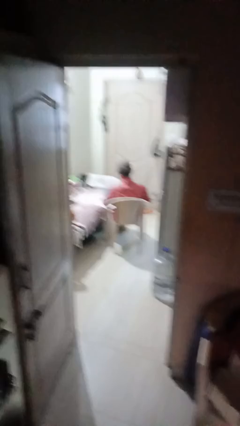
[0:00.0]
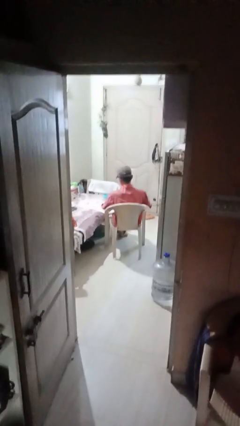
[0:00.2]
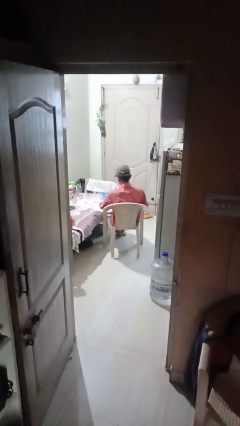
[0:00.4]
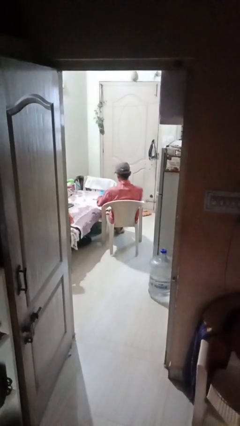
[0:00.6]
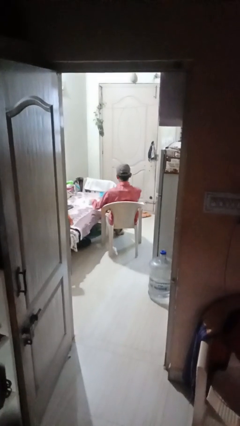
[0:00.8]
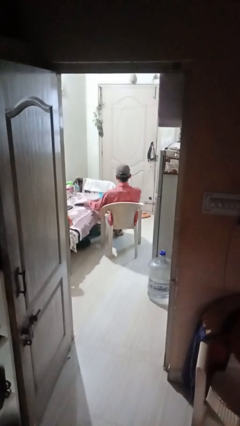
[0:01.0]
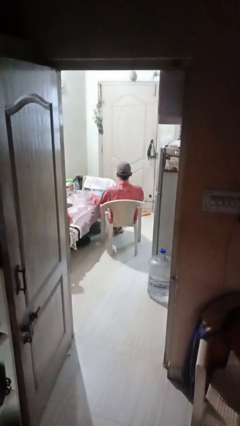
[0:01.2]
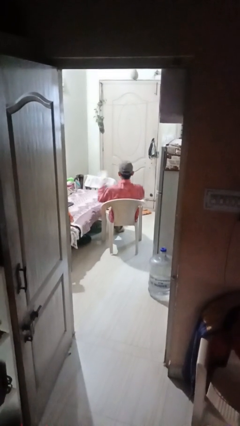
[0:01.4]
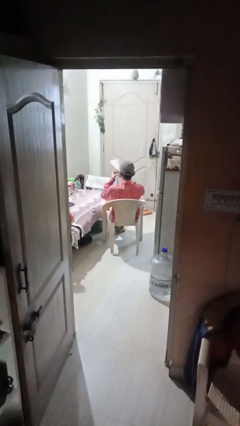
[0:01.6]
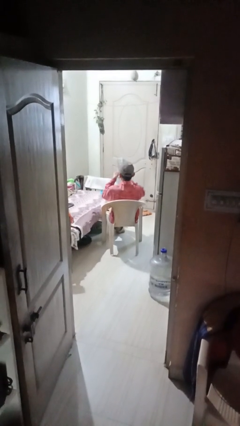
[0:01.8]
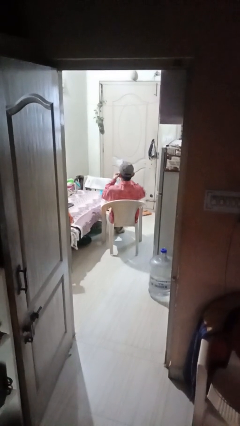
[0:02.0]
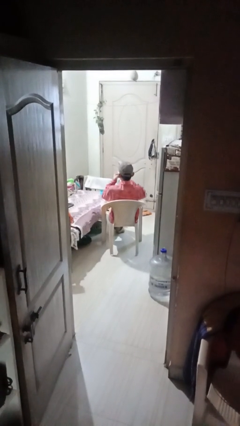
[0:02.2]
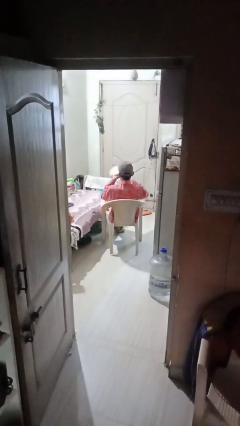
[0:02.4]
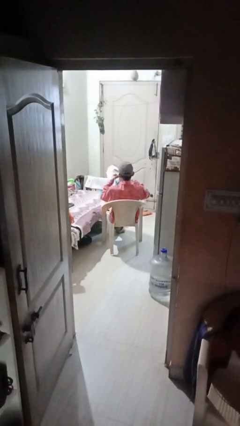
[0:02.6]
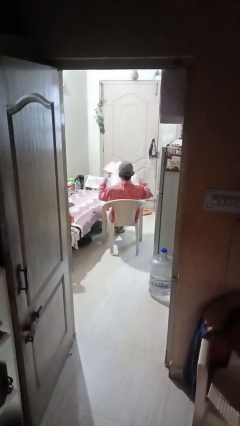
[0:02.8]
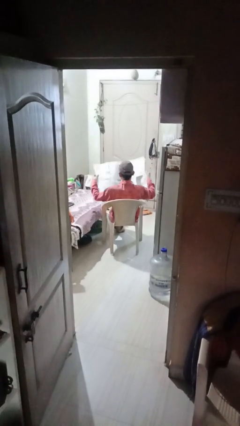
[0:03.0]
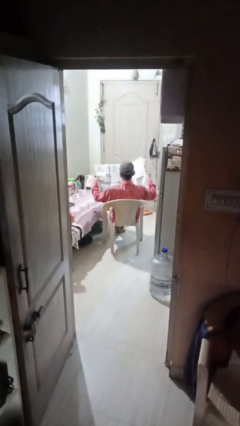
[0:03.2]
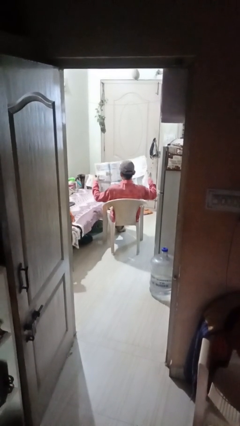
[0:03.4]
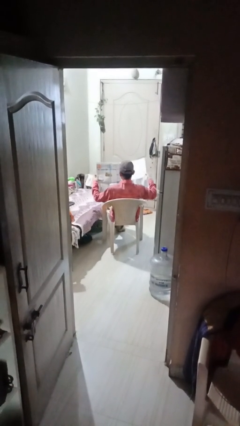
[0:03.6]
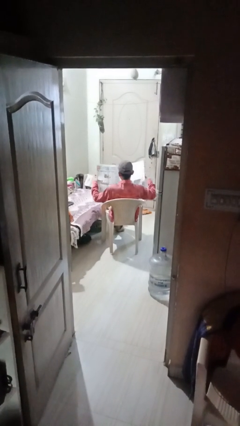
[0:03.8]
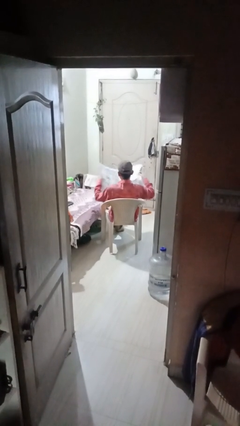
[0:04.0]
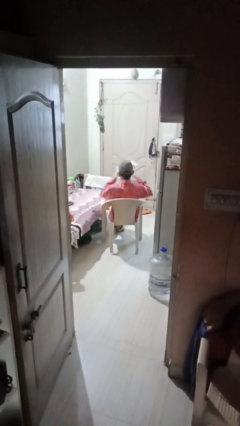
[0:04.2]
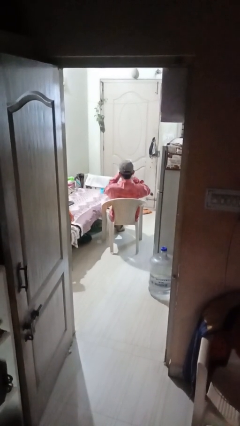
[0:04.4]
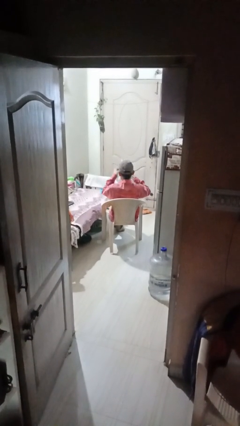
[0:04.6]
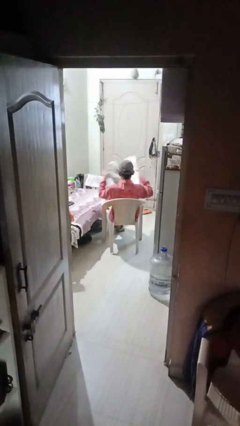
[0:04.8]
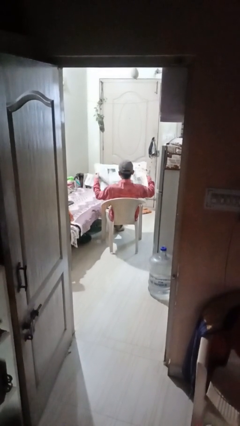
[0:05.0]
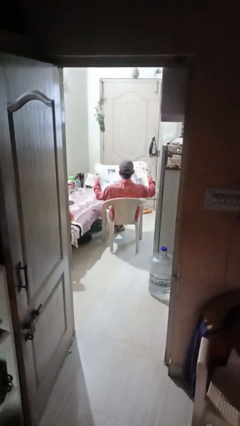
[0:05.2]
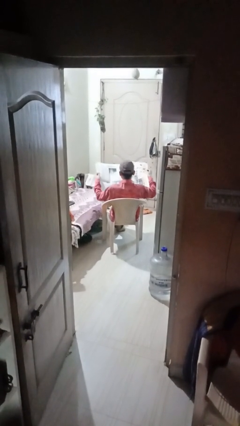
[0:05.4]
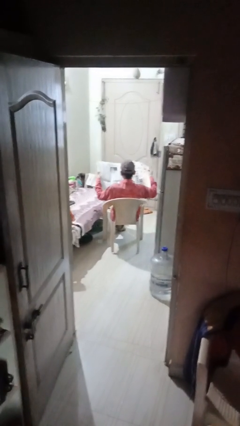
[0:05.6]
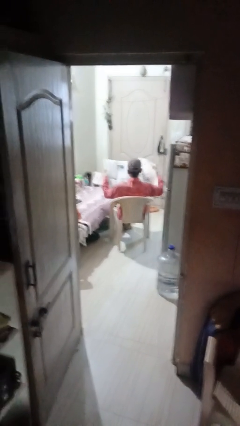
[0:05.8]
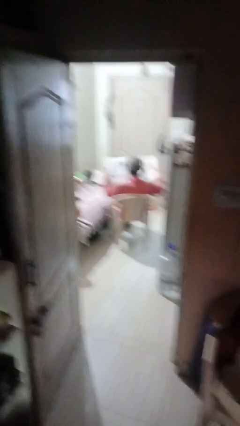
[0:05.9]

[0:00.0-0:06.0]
person reads newspaper

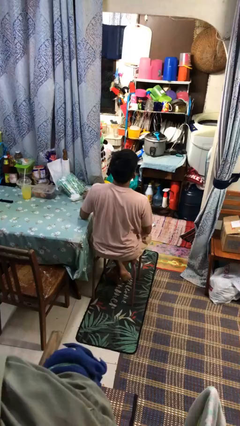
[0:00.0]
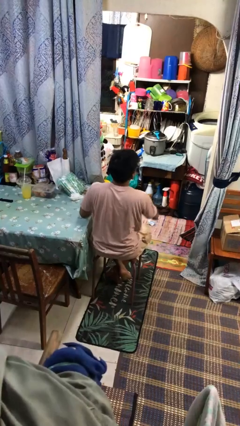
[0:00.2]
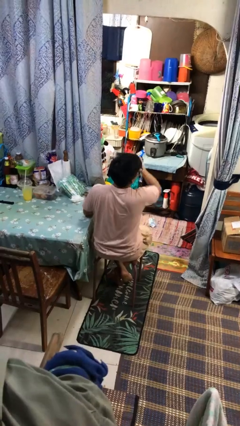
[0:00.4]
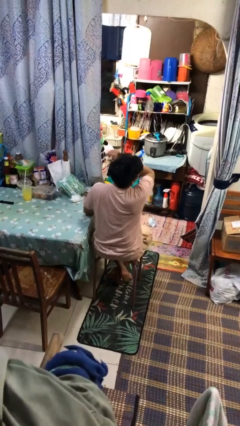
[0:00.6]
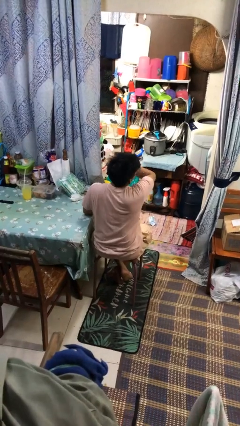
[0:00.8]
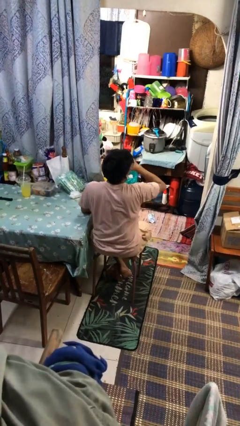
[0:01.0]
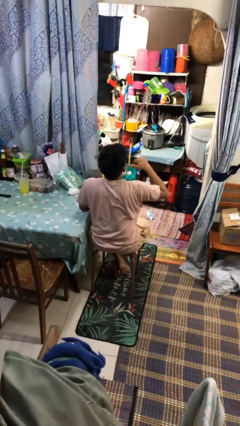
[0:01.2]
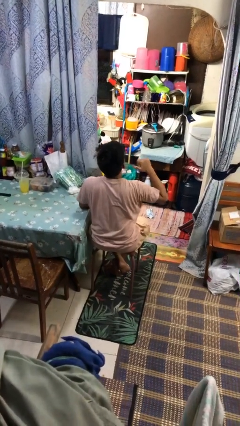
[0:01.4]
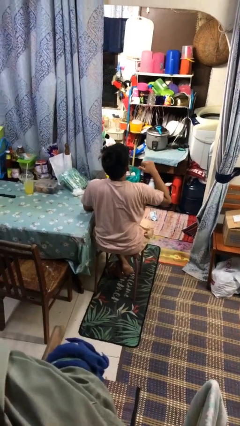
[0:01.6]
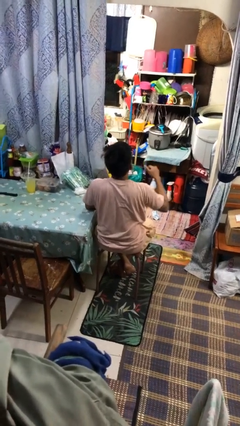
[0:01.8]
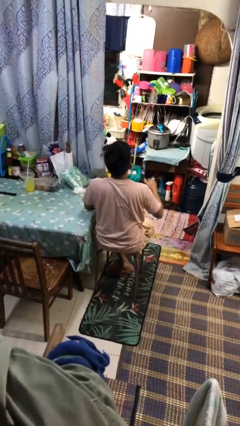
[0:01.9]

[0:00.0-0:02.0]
person gestures cut

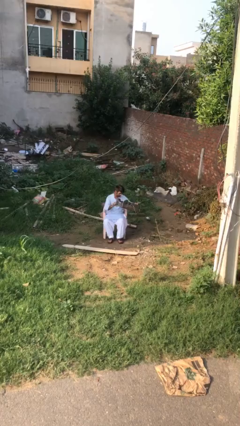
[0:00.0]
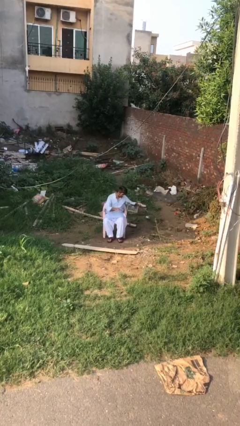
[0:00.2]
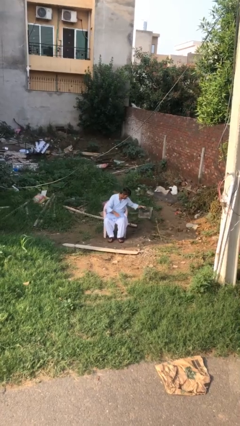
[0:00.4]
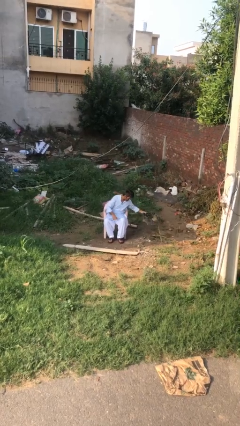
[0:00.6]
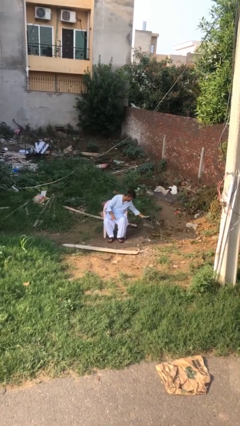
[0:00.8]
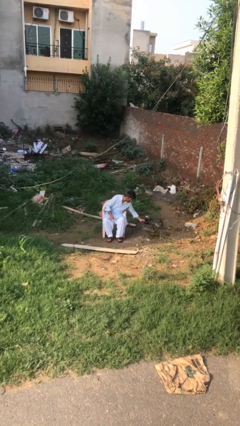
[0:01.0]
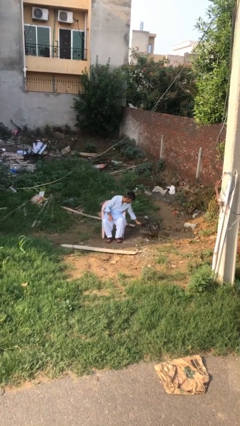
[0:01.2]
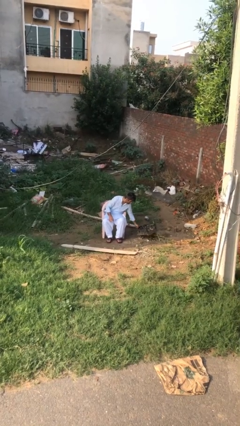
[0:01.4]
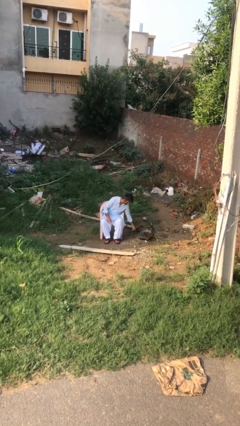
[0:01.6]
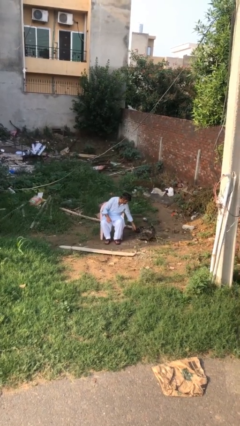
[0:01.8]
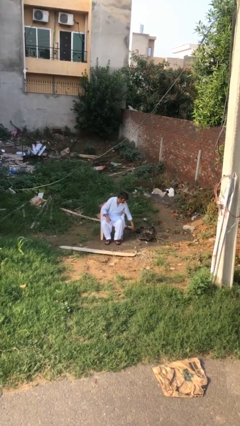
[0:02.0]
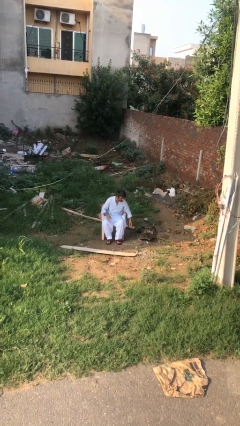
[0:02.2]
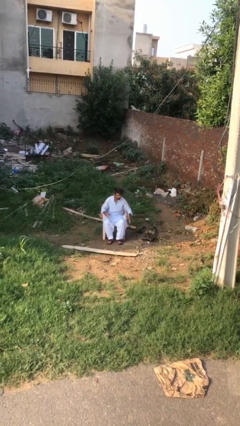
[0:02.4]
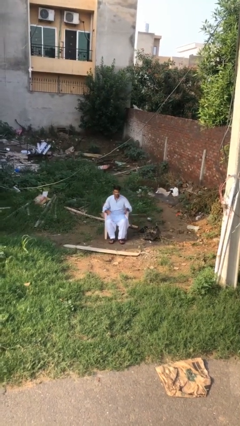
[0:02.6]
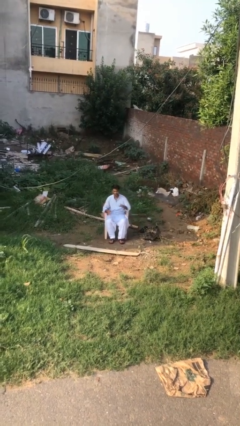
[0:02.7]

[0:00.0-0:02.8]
person puts down object on floor

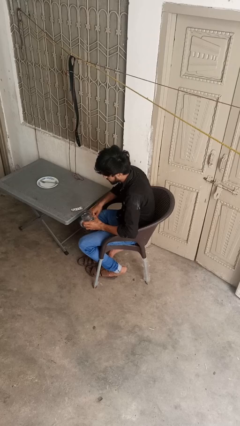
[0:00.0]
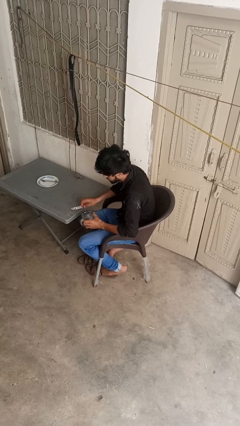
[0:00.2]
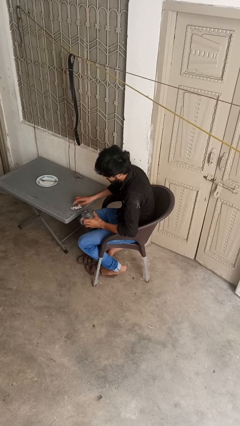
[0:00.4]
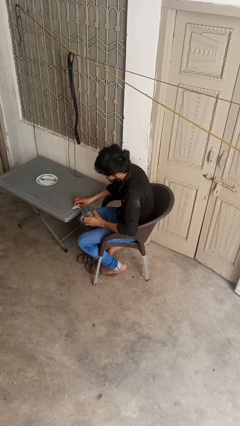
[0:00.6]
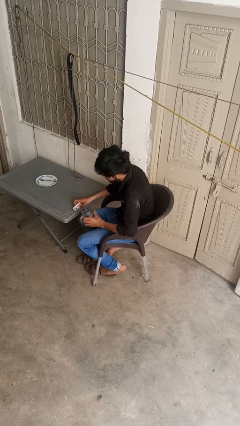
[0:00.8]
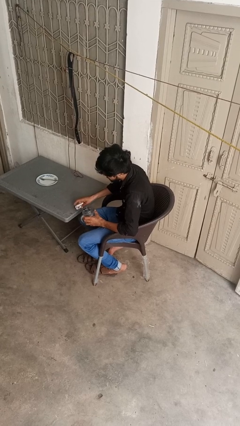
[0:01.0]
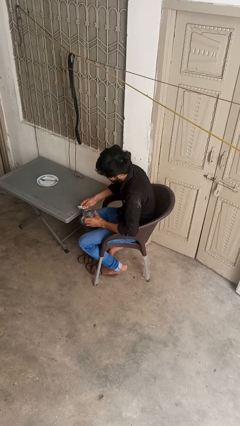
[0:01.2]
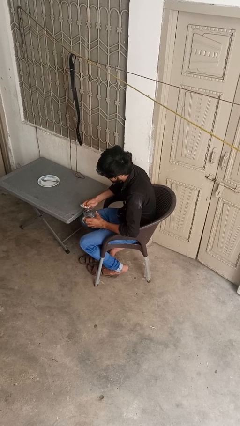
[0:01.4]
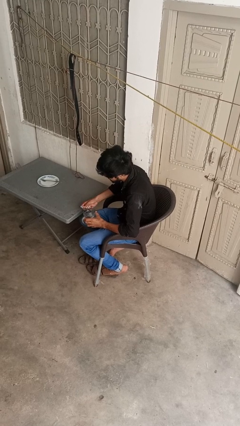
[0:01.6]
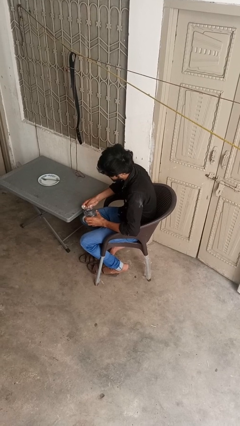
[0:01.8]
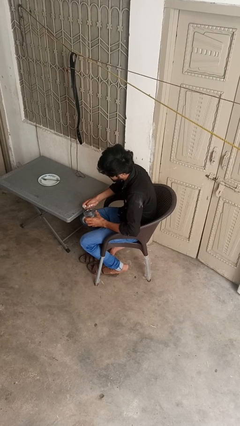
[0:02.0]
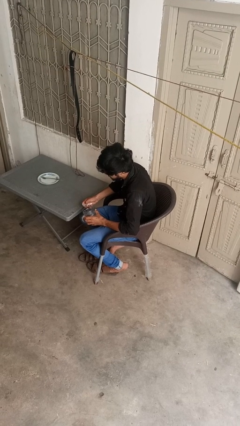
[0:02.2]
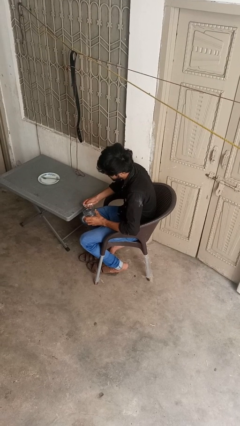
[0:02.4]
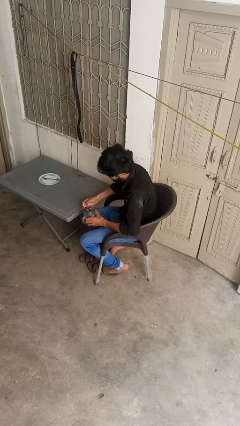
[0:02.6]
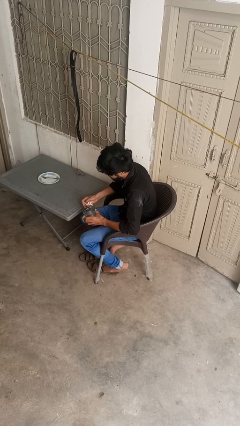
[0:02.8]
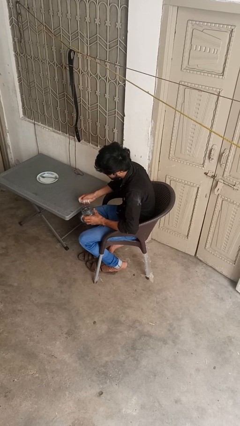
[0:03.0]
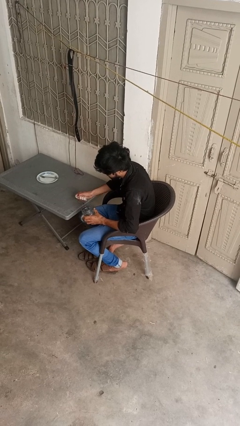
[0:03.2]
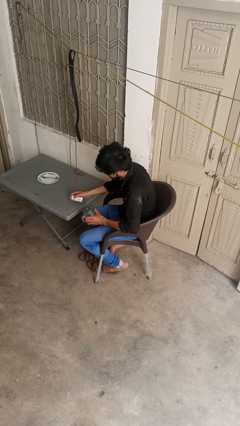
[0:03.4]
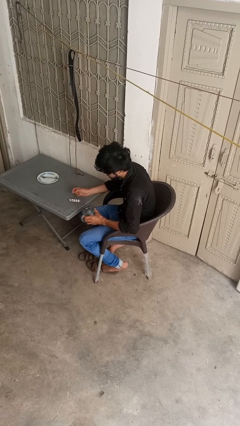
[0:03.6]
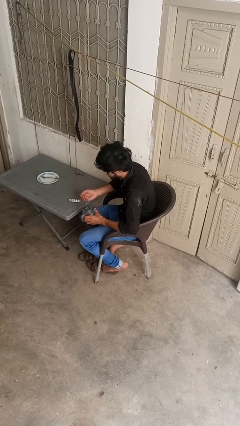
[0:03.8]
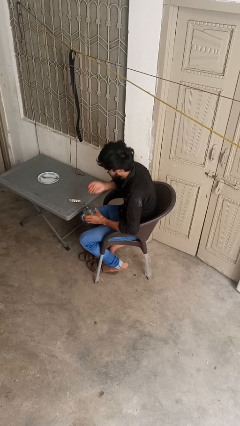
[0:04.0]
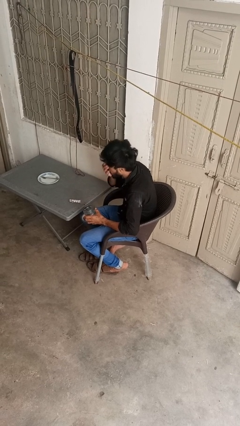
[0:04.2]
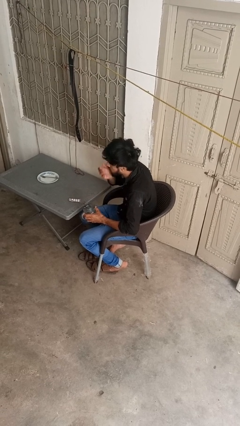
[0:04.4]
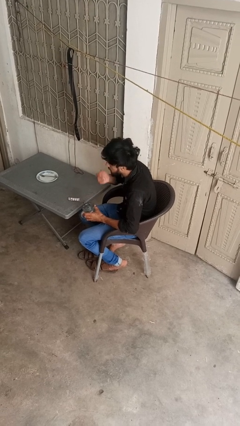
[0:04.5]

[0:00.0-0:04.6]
person takes medicine pills

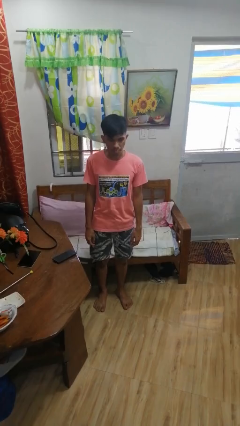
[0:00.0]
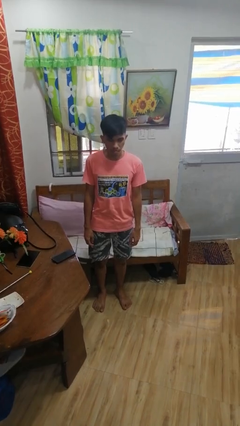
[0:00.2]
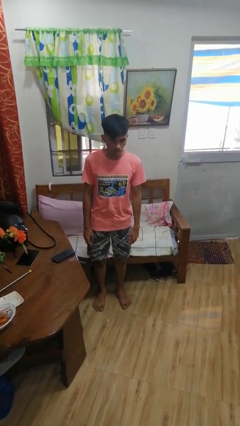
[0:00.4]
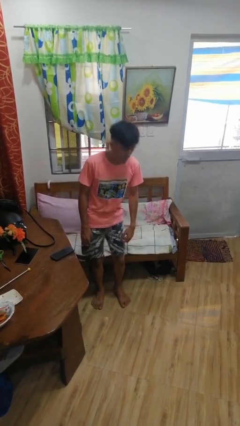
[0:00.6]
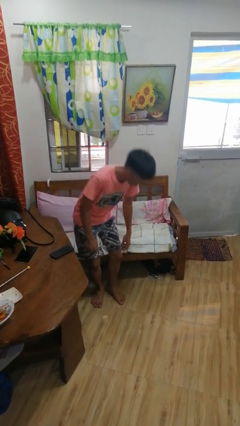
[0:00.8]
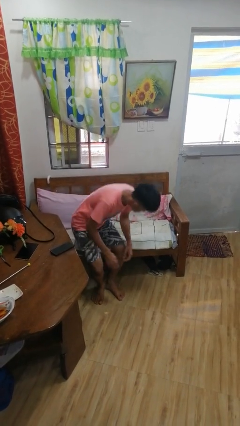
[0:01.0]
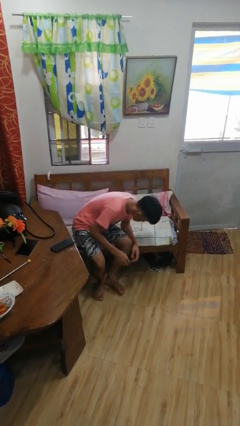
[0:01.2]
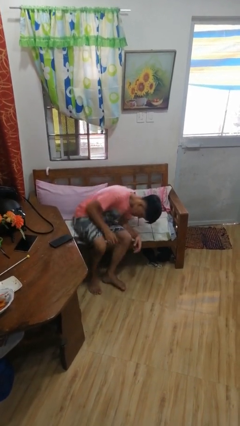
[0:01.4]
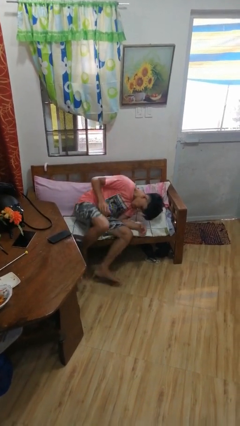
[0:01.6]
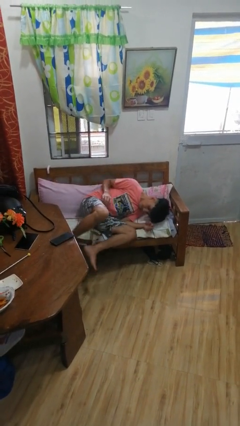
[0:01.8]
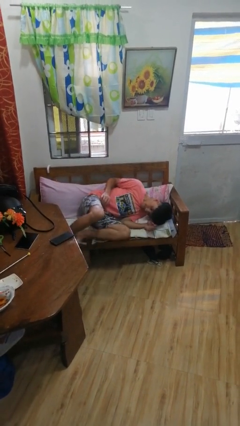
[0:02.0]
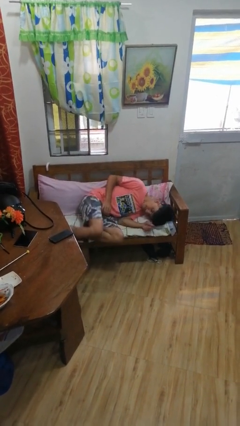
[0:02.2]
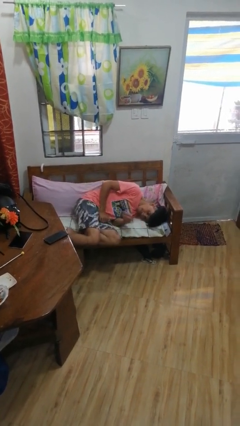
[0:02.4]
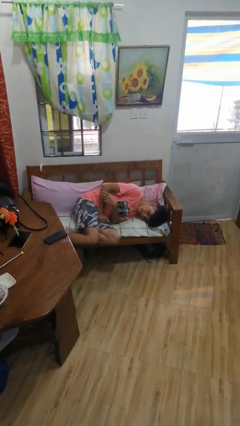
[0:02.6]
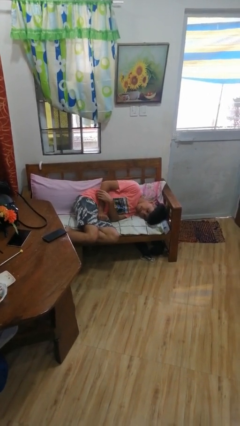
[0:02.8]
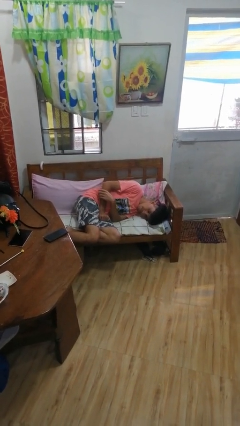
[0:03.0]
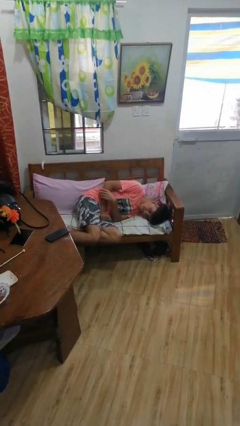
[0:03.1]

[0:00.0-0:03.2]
person lies down on couch
